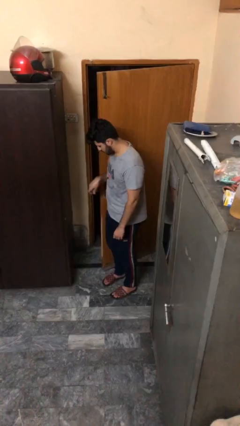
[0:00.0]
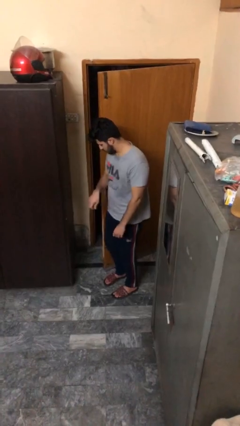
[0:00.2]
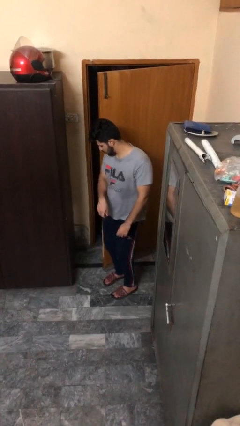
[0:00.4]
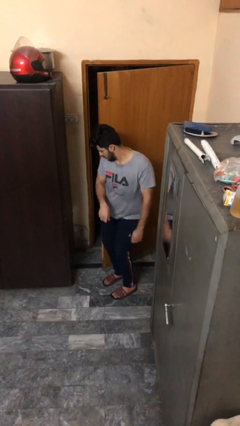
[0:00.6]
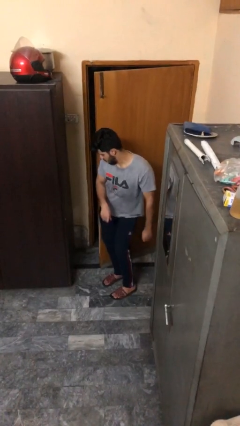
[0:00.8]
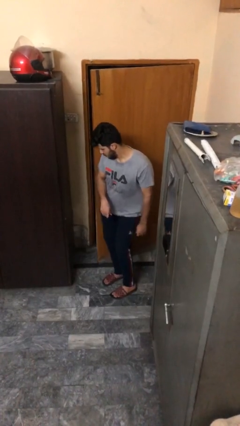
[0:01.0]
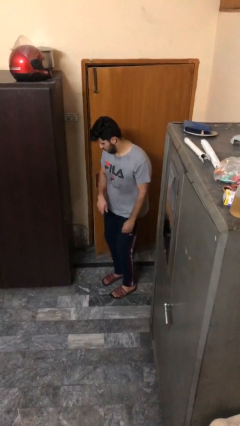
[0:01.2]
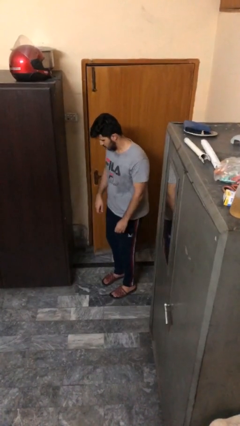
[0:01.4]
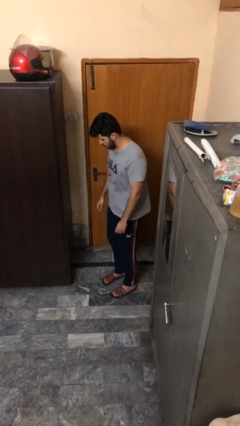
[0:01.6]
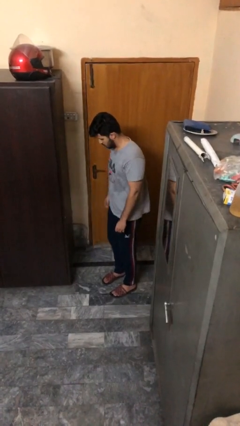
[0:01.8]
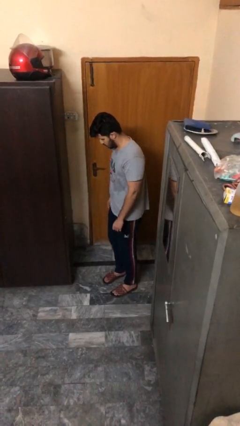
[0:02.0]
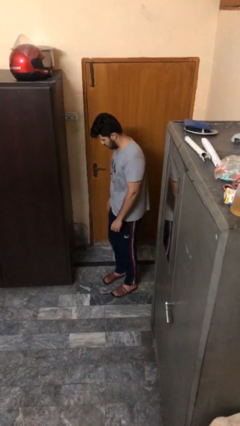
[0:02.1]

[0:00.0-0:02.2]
person closes door with hip

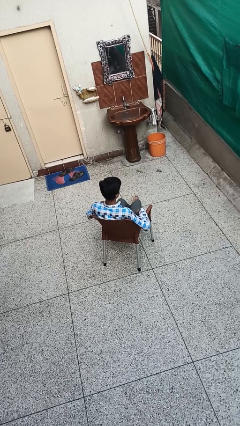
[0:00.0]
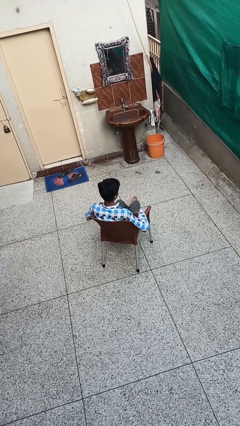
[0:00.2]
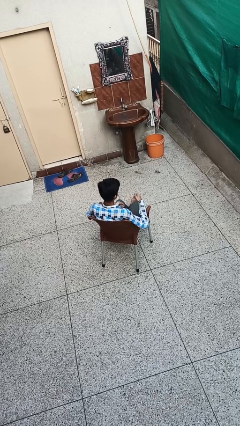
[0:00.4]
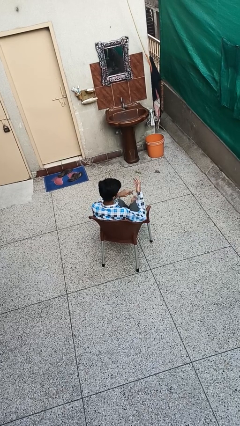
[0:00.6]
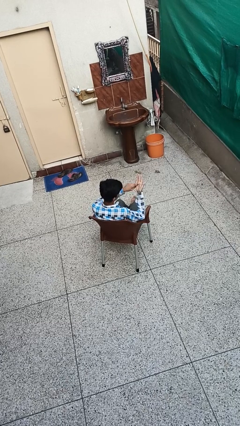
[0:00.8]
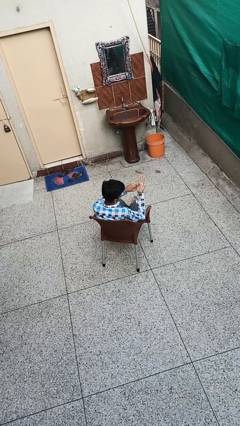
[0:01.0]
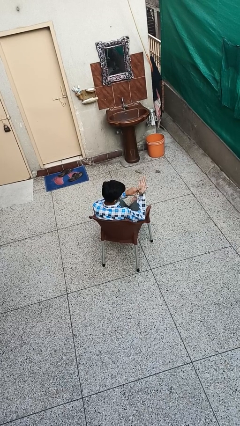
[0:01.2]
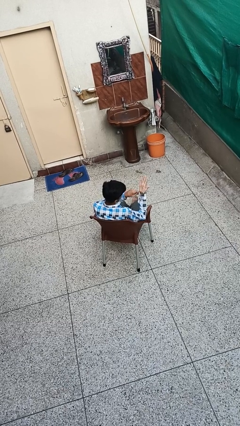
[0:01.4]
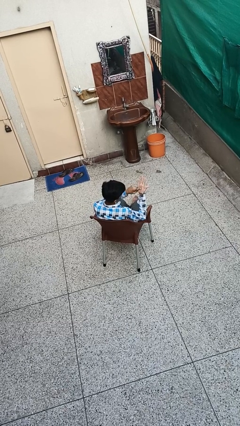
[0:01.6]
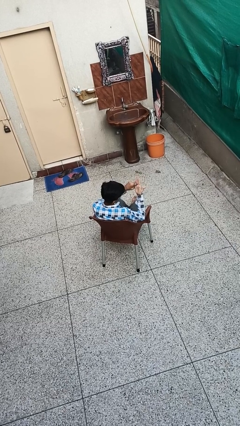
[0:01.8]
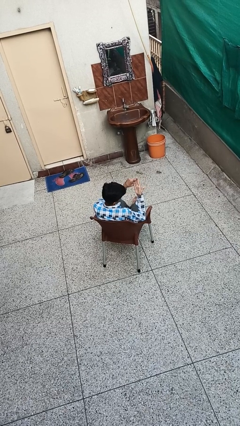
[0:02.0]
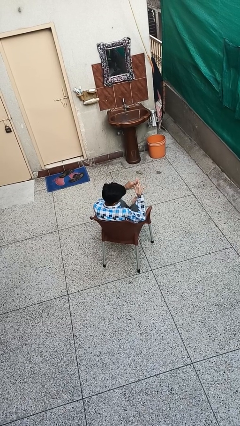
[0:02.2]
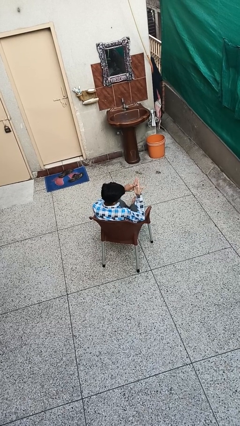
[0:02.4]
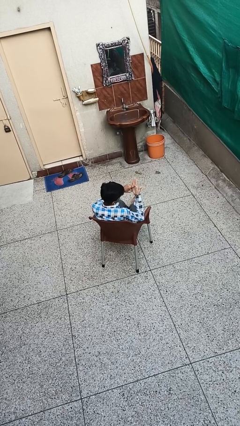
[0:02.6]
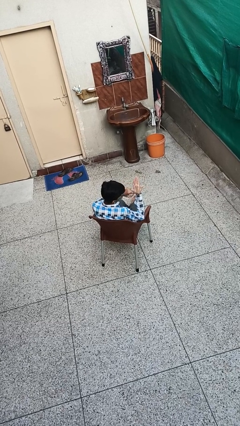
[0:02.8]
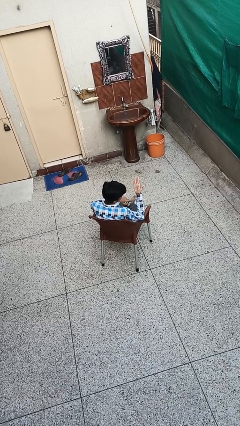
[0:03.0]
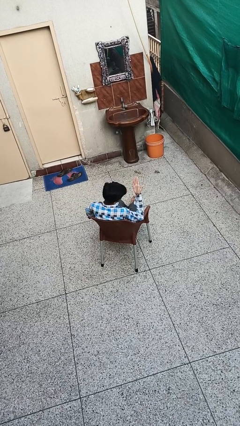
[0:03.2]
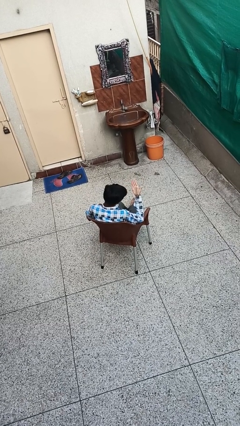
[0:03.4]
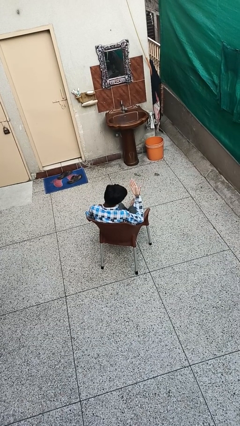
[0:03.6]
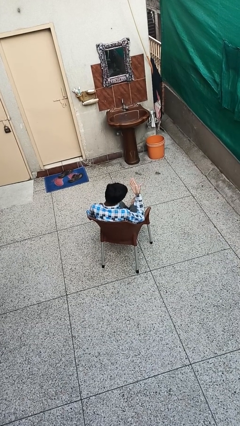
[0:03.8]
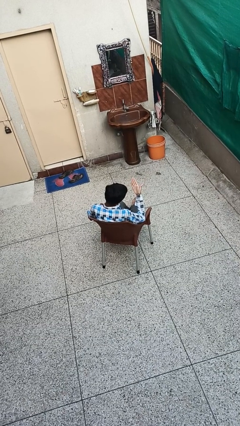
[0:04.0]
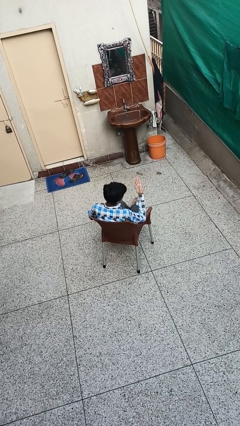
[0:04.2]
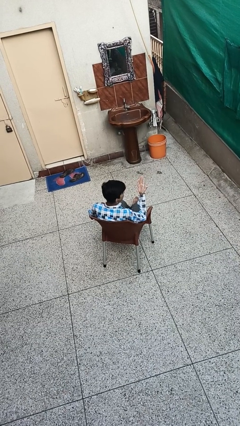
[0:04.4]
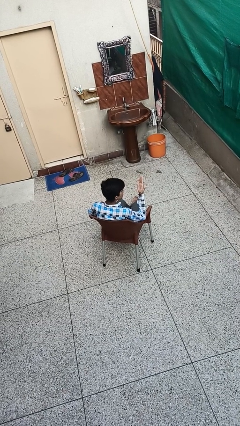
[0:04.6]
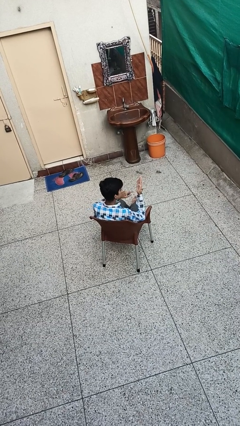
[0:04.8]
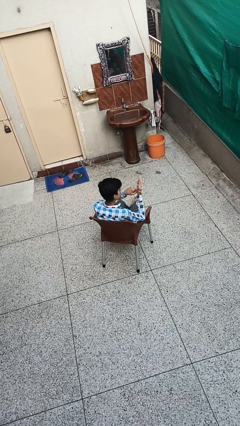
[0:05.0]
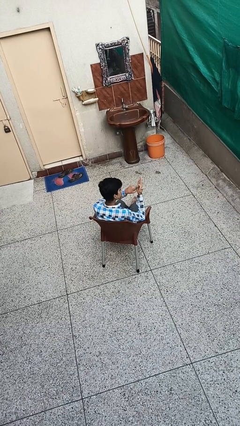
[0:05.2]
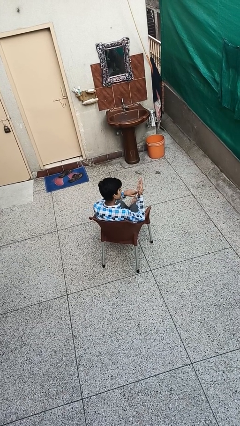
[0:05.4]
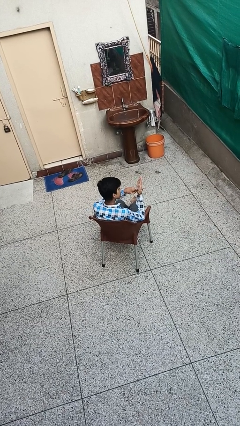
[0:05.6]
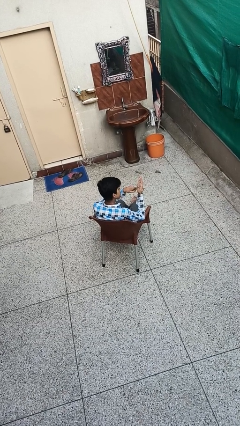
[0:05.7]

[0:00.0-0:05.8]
person looks at hands in lap

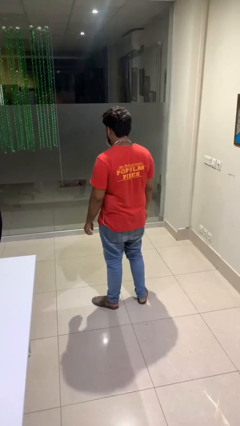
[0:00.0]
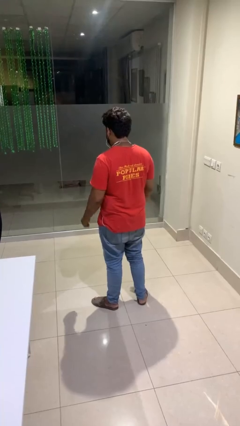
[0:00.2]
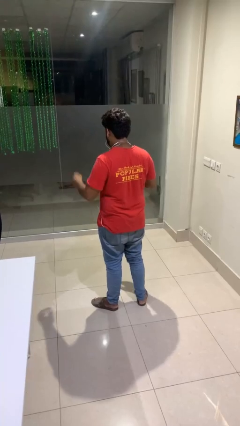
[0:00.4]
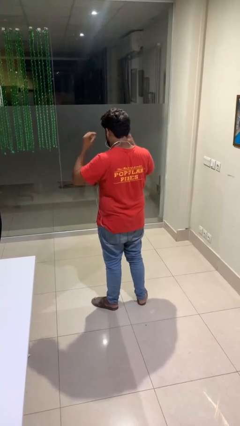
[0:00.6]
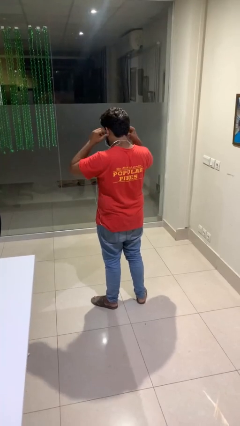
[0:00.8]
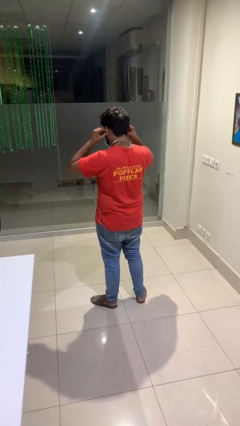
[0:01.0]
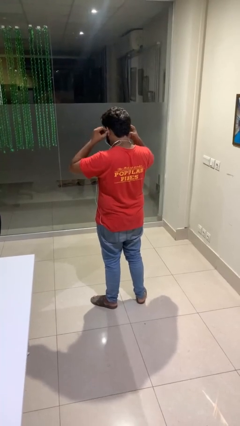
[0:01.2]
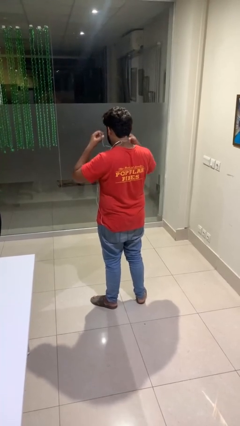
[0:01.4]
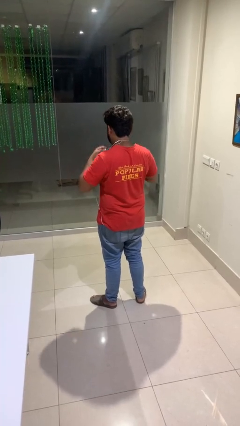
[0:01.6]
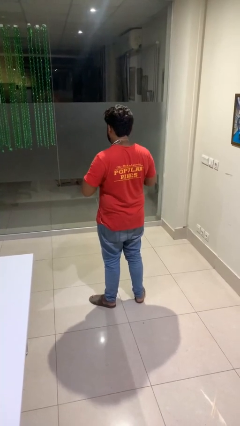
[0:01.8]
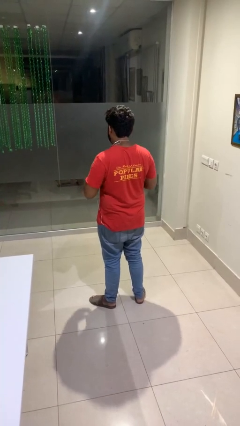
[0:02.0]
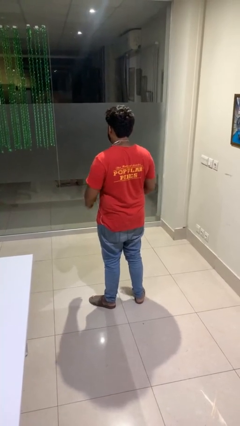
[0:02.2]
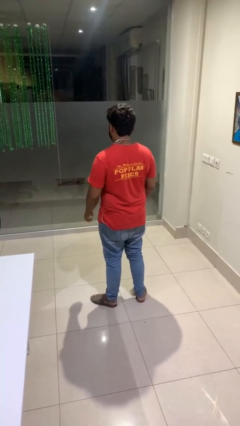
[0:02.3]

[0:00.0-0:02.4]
person takes off headphones

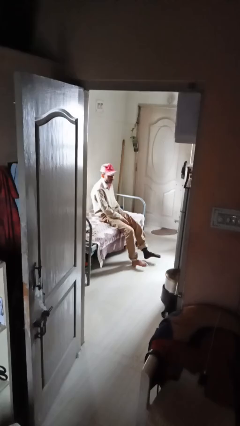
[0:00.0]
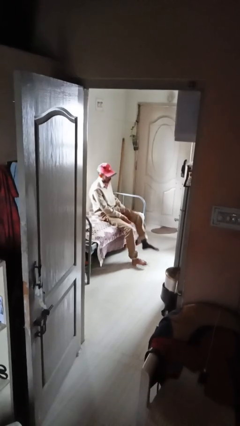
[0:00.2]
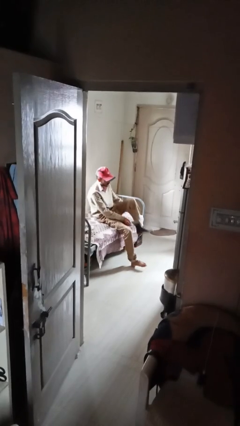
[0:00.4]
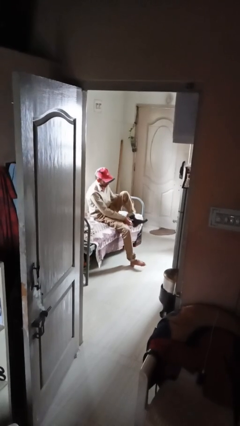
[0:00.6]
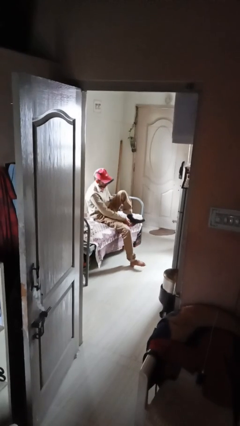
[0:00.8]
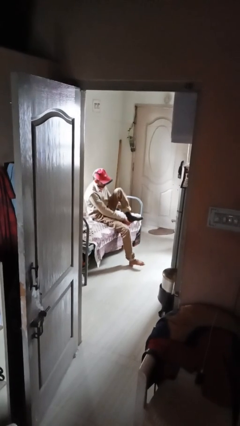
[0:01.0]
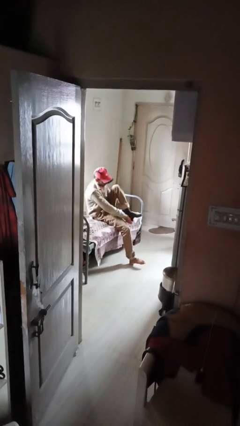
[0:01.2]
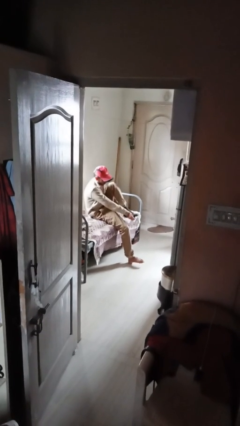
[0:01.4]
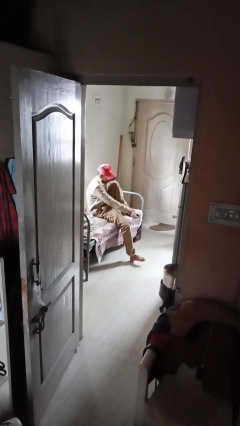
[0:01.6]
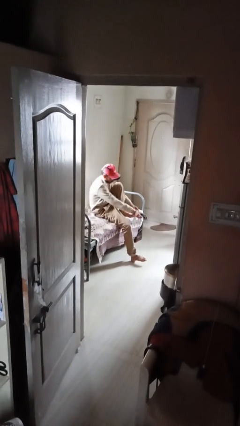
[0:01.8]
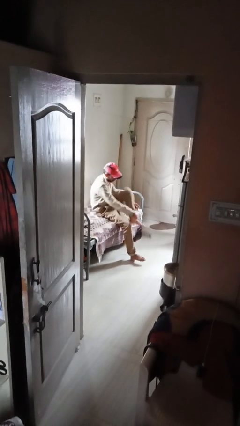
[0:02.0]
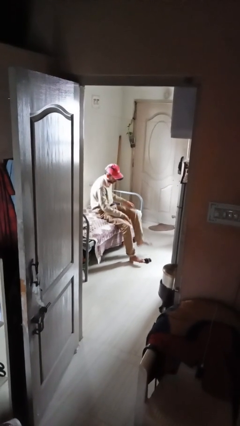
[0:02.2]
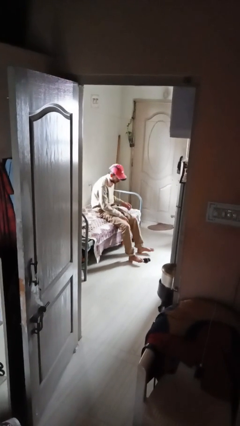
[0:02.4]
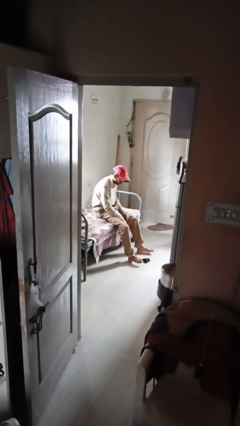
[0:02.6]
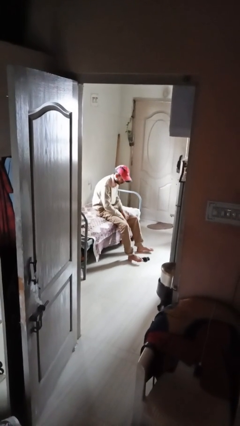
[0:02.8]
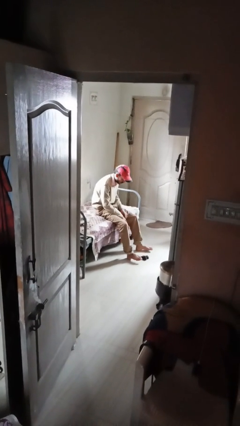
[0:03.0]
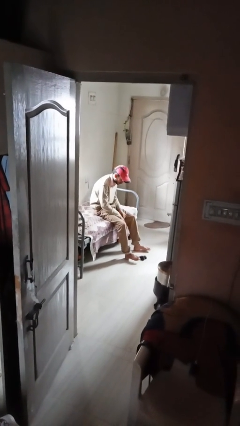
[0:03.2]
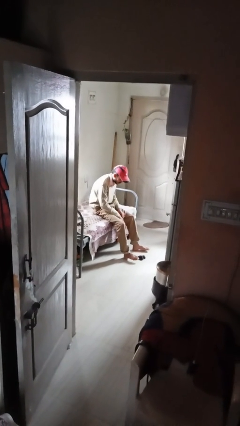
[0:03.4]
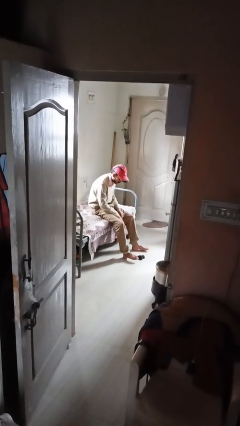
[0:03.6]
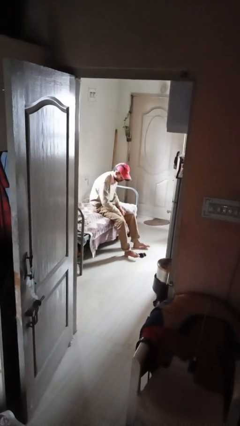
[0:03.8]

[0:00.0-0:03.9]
person takes off socks

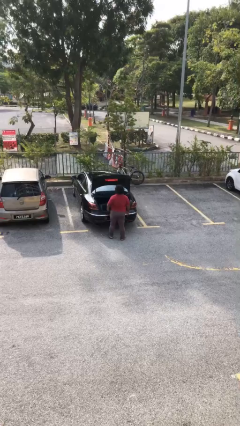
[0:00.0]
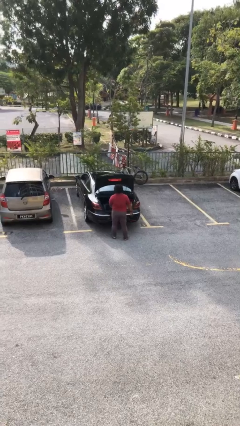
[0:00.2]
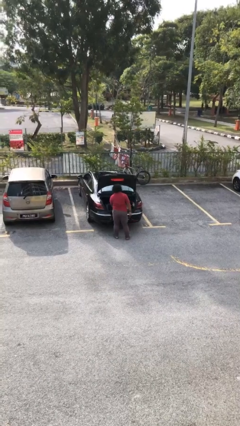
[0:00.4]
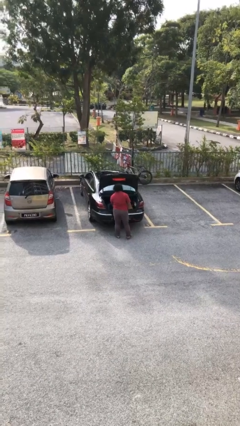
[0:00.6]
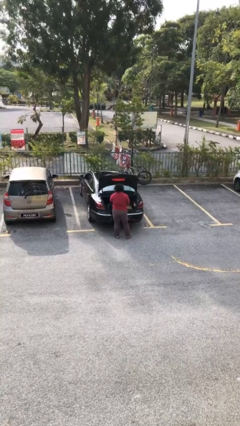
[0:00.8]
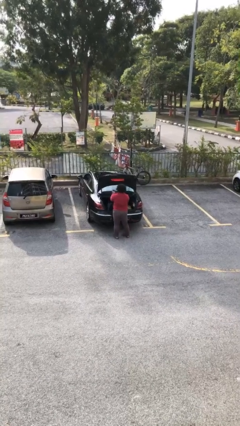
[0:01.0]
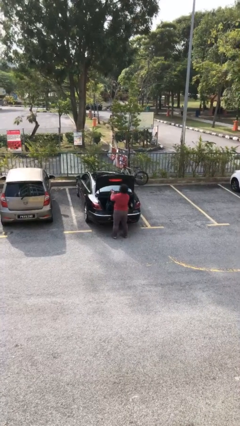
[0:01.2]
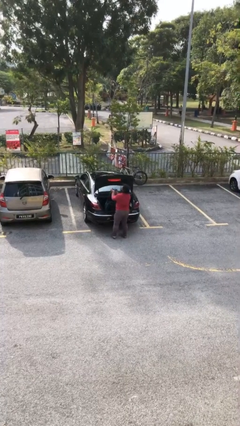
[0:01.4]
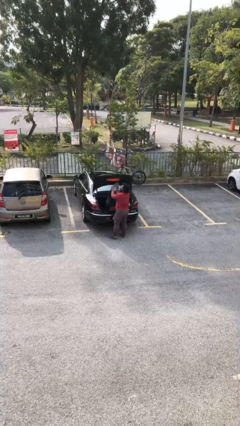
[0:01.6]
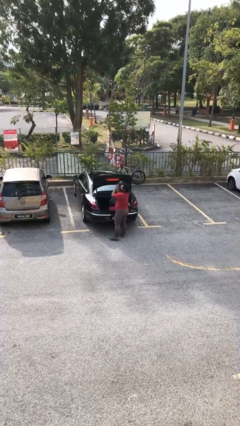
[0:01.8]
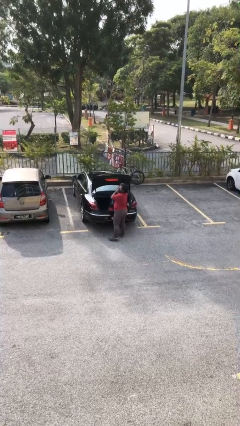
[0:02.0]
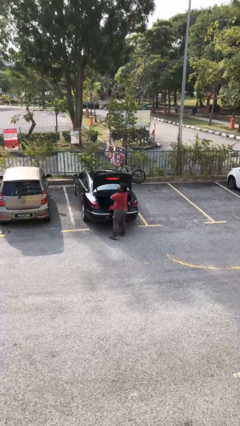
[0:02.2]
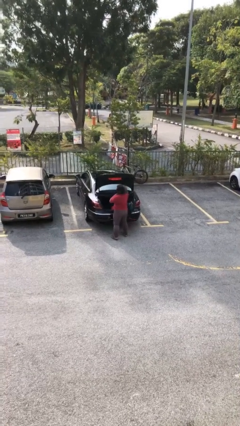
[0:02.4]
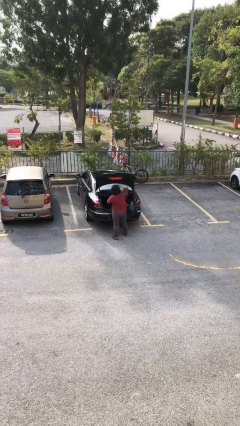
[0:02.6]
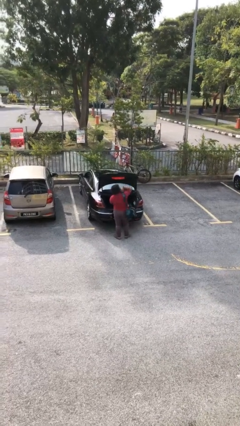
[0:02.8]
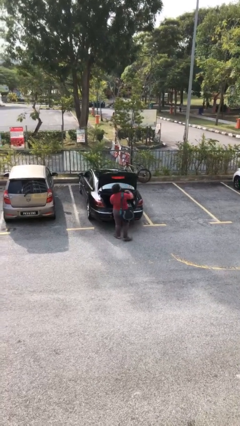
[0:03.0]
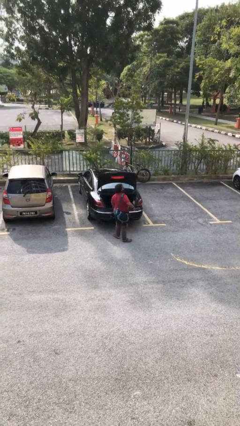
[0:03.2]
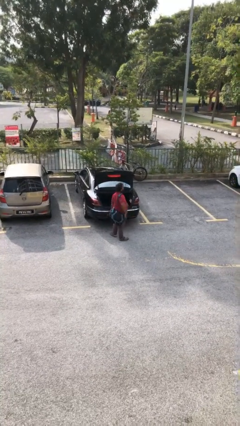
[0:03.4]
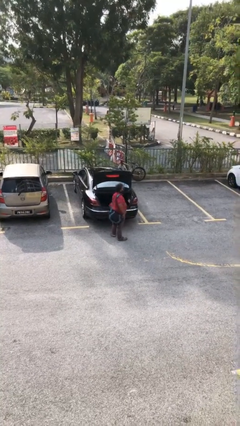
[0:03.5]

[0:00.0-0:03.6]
person unloads car
